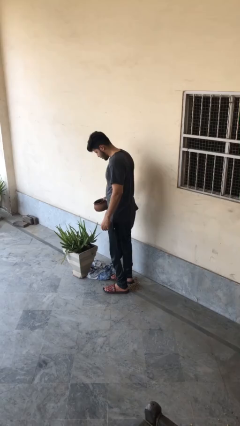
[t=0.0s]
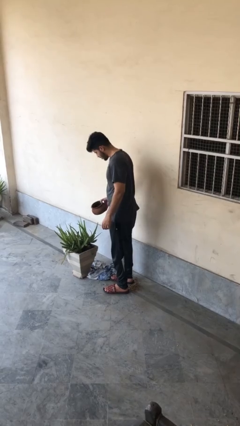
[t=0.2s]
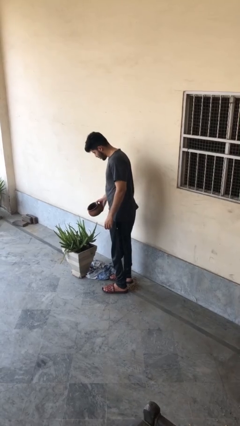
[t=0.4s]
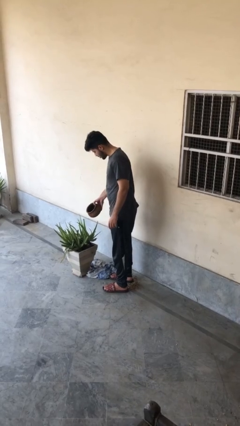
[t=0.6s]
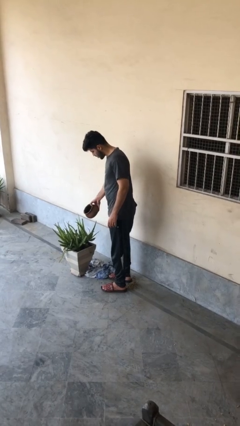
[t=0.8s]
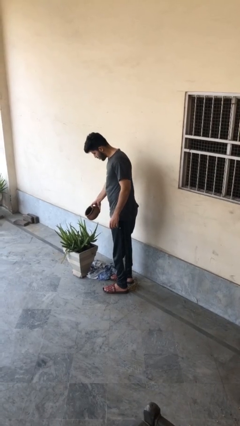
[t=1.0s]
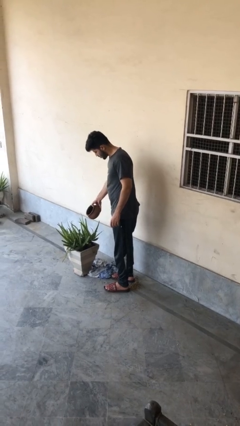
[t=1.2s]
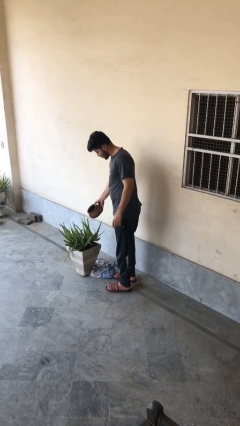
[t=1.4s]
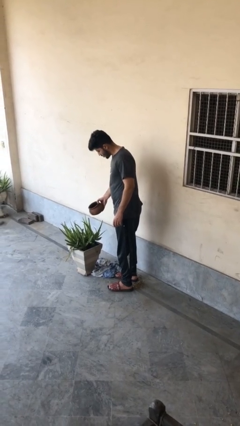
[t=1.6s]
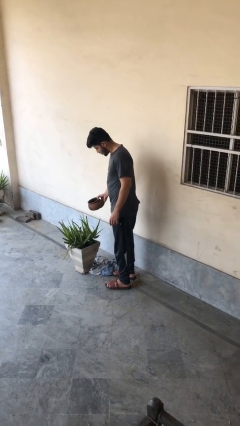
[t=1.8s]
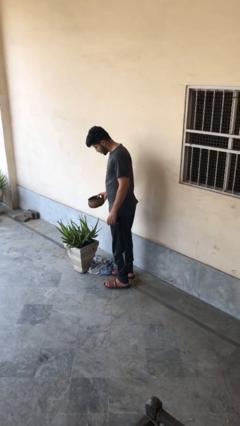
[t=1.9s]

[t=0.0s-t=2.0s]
person waters houseplant

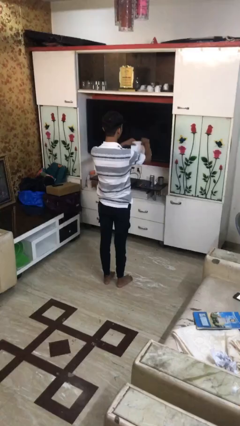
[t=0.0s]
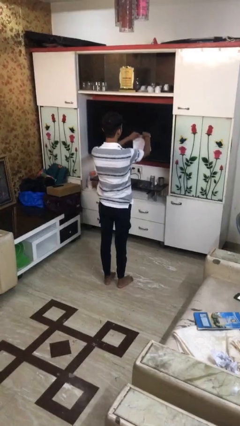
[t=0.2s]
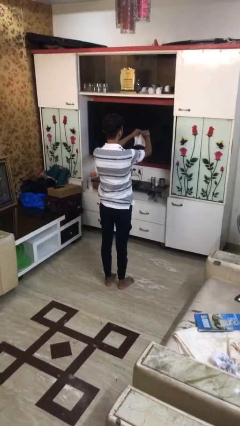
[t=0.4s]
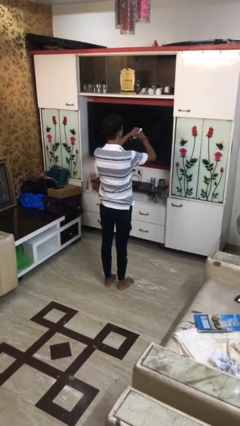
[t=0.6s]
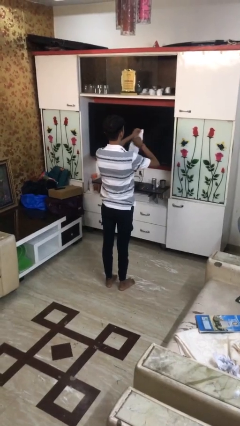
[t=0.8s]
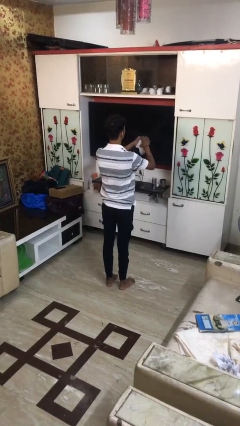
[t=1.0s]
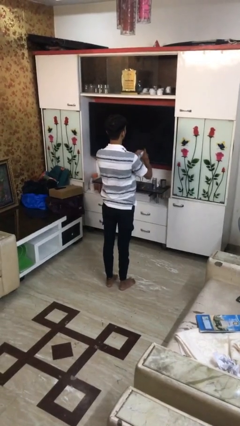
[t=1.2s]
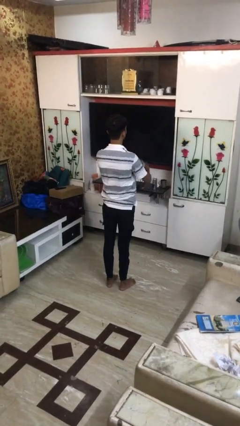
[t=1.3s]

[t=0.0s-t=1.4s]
person tears paper

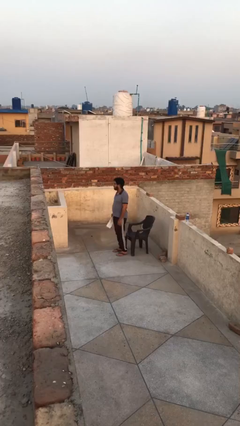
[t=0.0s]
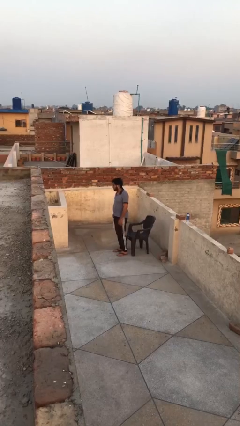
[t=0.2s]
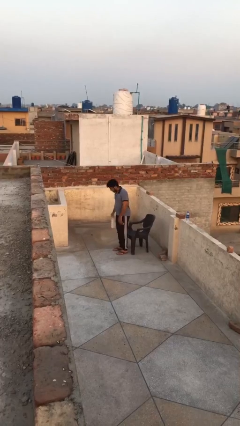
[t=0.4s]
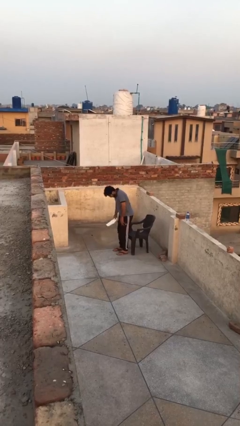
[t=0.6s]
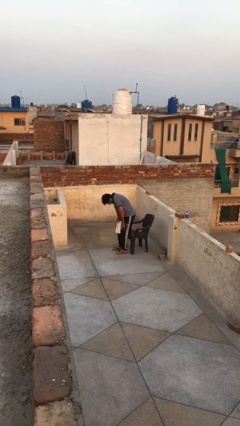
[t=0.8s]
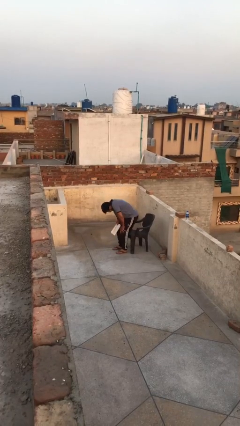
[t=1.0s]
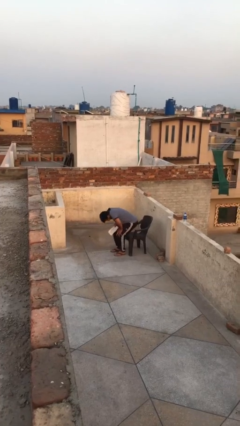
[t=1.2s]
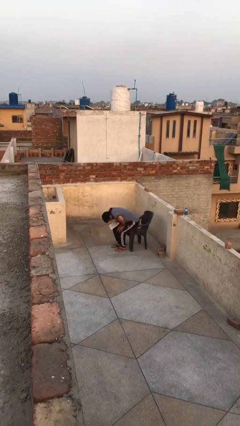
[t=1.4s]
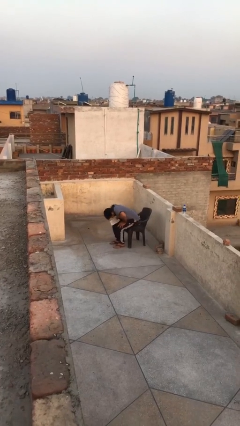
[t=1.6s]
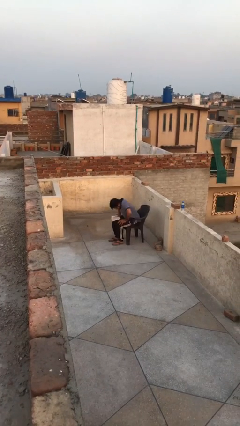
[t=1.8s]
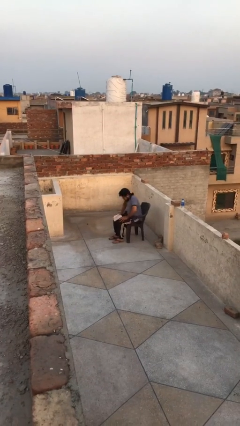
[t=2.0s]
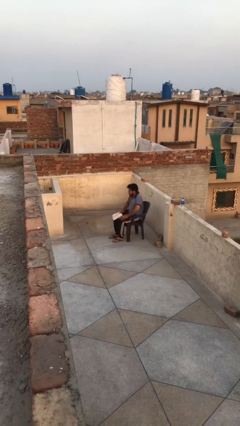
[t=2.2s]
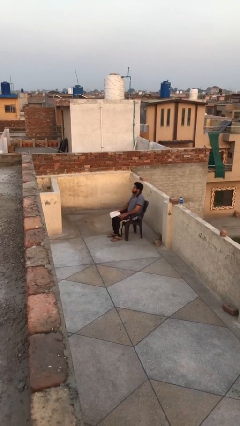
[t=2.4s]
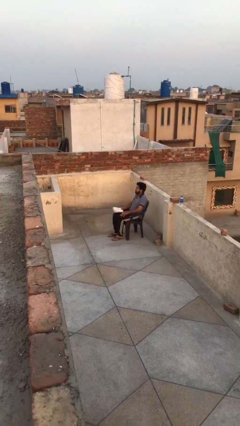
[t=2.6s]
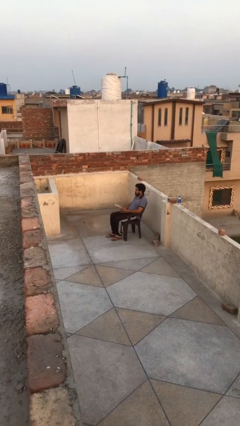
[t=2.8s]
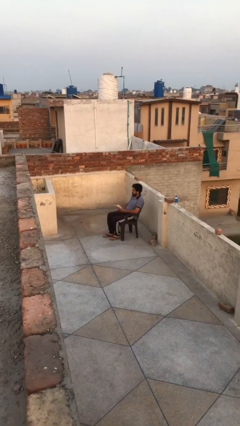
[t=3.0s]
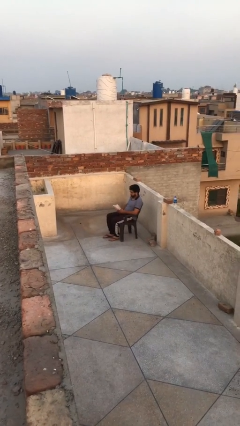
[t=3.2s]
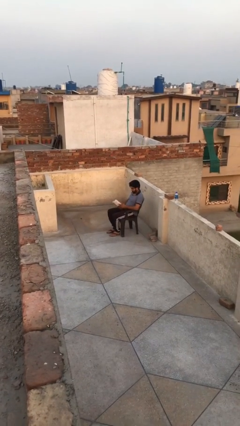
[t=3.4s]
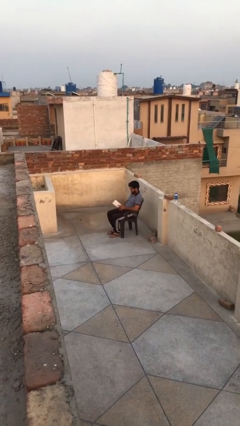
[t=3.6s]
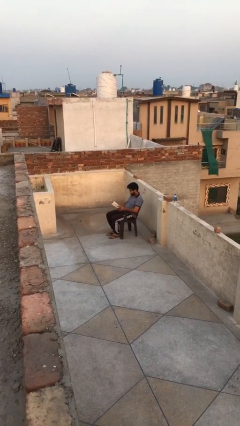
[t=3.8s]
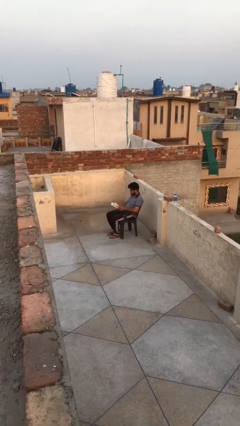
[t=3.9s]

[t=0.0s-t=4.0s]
person sits down

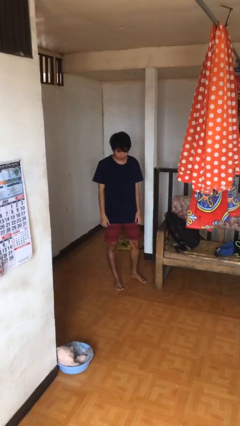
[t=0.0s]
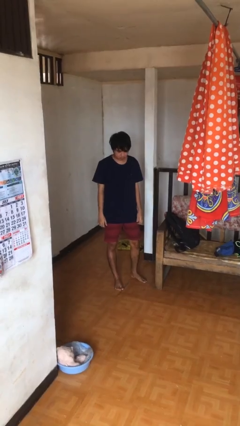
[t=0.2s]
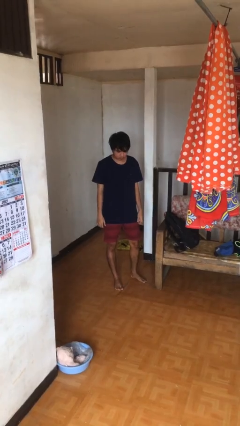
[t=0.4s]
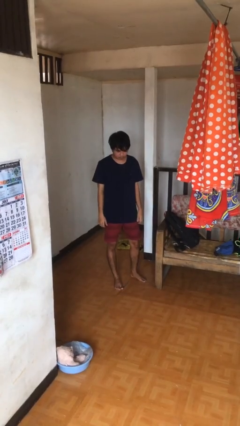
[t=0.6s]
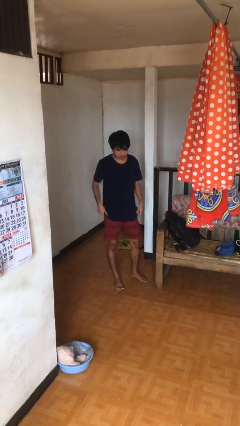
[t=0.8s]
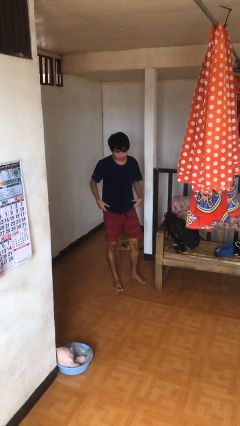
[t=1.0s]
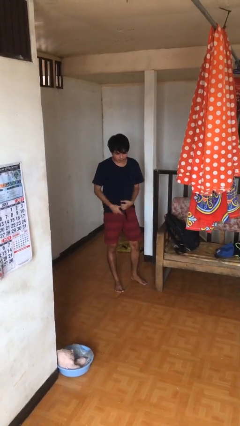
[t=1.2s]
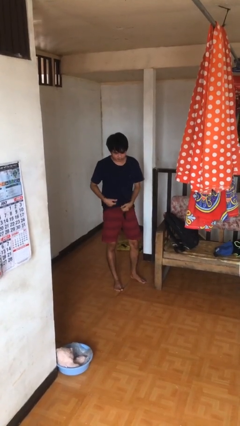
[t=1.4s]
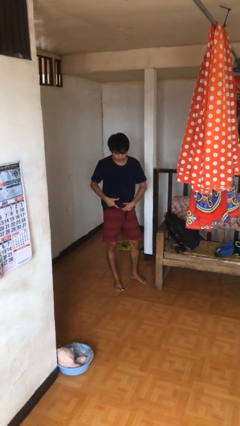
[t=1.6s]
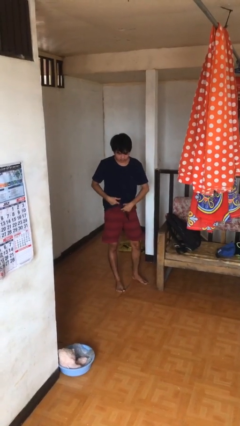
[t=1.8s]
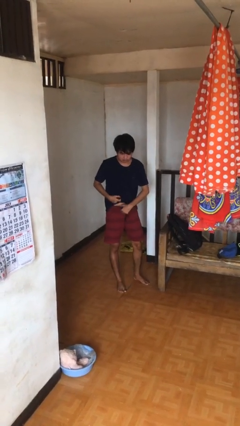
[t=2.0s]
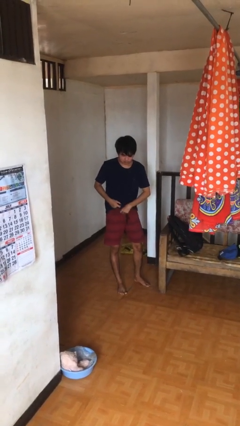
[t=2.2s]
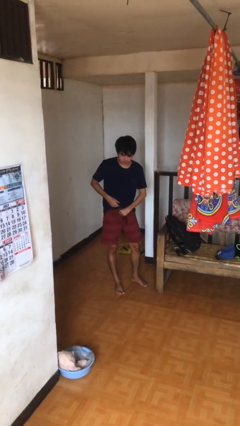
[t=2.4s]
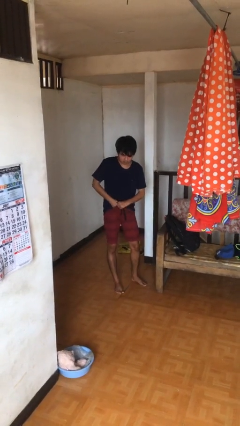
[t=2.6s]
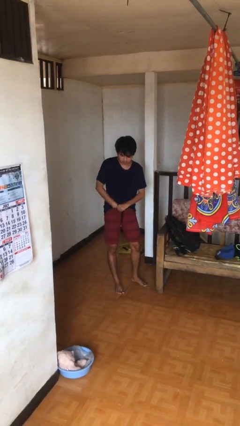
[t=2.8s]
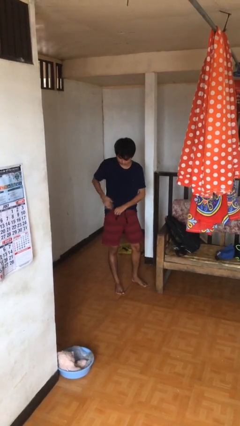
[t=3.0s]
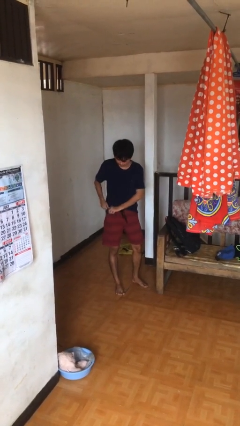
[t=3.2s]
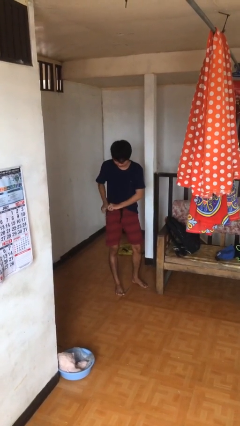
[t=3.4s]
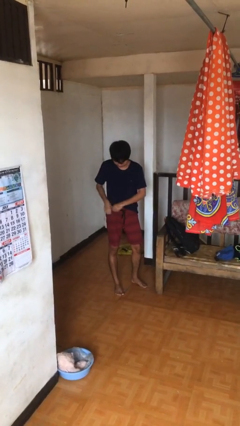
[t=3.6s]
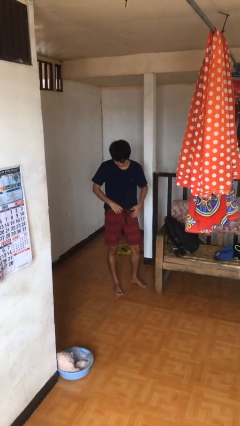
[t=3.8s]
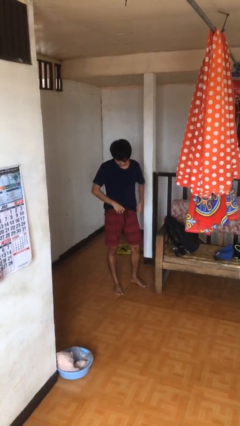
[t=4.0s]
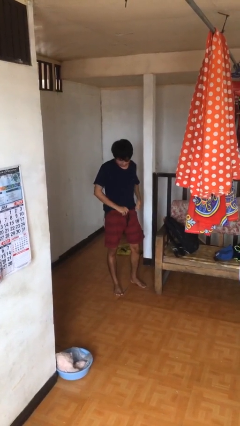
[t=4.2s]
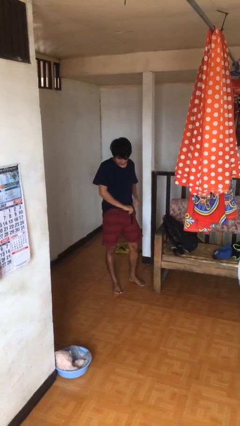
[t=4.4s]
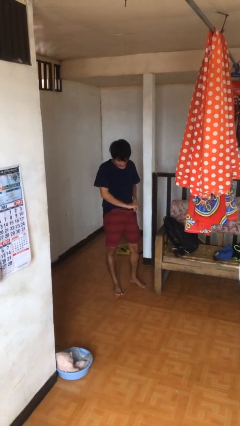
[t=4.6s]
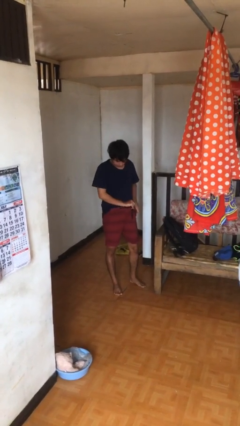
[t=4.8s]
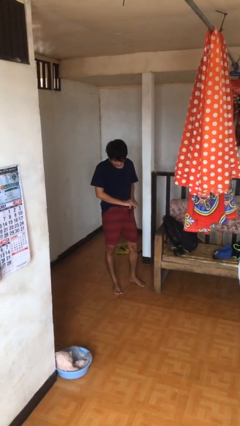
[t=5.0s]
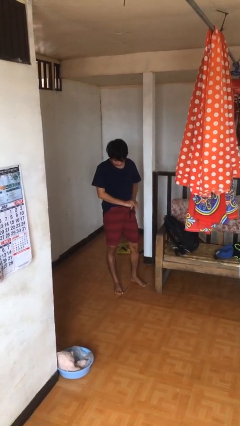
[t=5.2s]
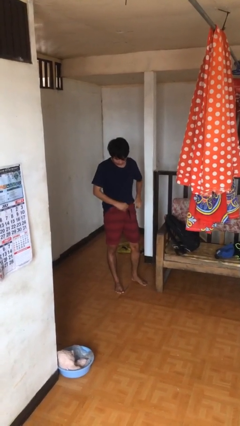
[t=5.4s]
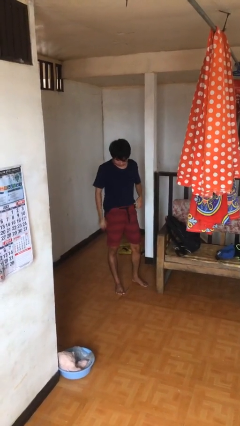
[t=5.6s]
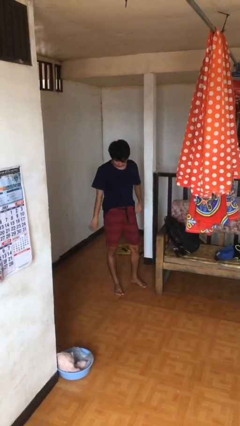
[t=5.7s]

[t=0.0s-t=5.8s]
person tucks in shirt

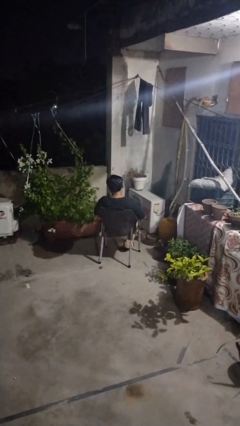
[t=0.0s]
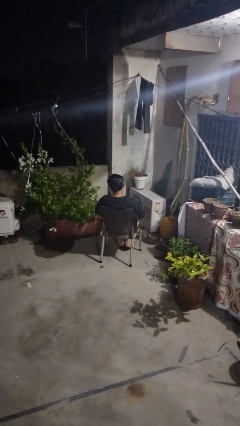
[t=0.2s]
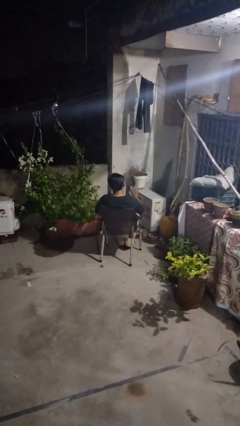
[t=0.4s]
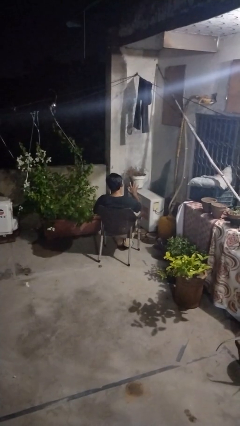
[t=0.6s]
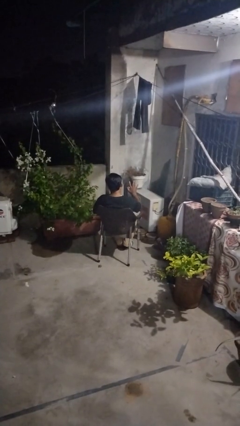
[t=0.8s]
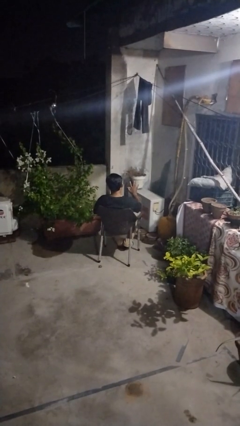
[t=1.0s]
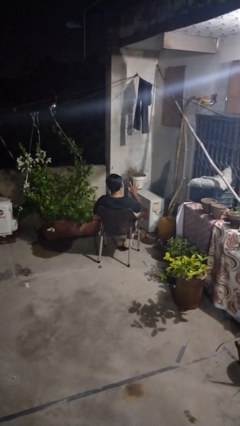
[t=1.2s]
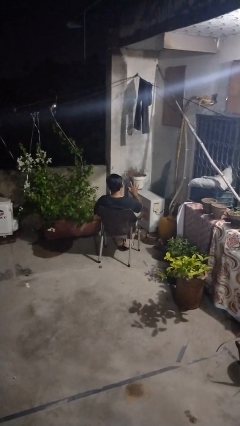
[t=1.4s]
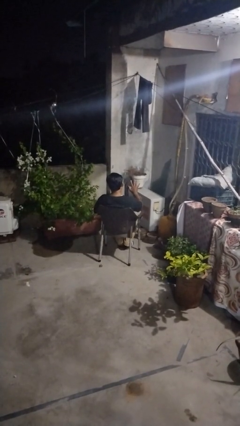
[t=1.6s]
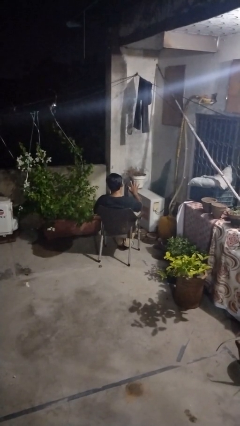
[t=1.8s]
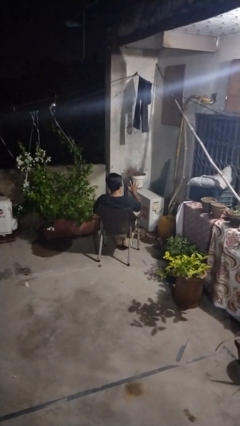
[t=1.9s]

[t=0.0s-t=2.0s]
person gestures number five

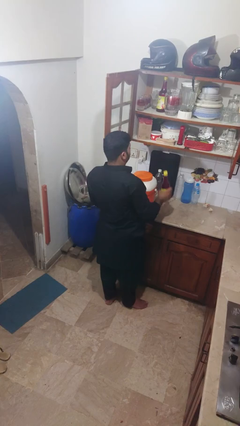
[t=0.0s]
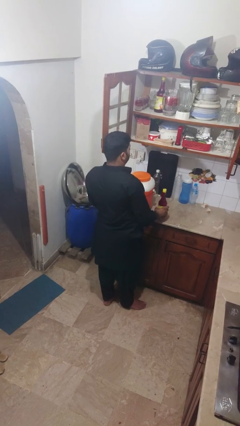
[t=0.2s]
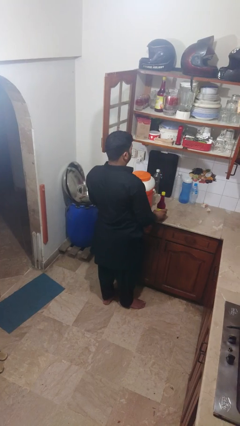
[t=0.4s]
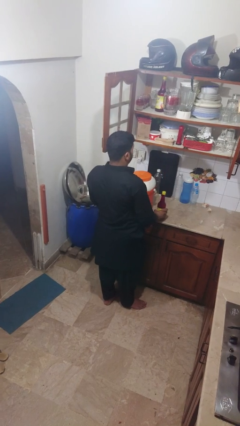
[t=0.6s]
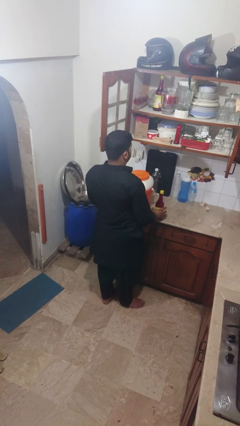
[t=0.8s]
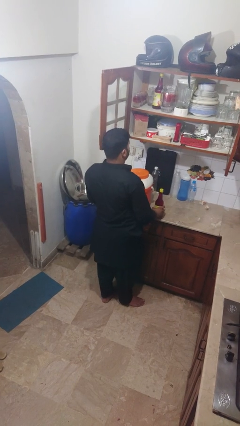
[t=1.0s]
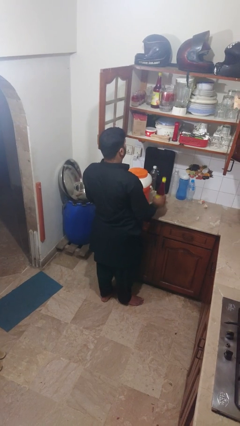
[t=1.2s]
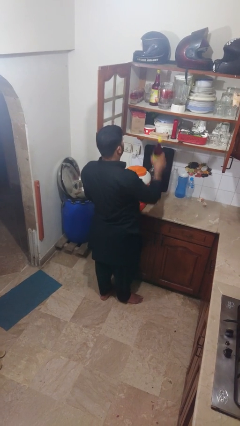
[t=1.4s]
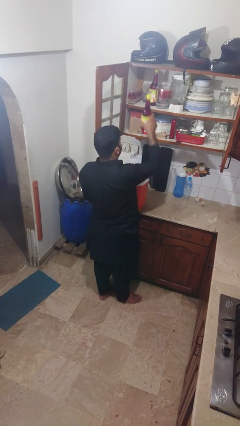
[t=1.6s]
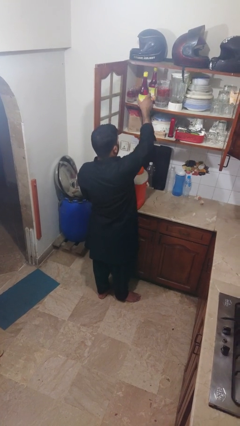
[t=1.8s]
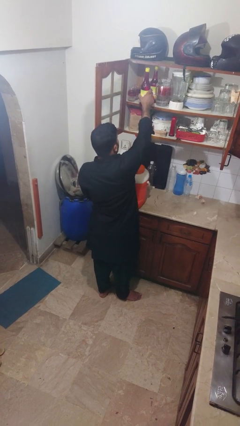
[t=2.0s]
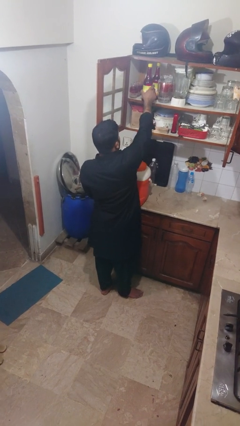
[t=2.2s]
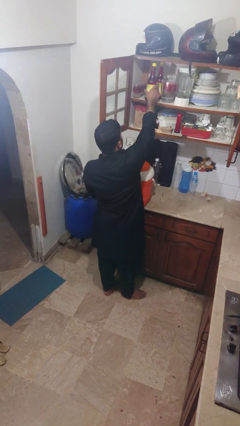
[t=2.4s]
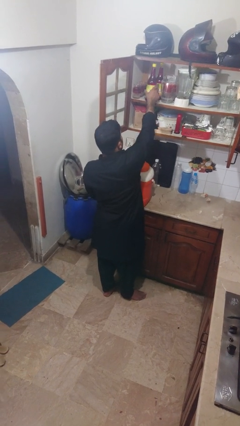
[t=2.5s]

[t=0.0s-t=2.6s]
person puts down object into cabinet
